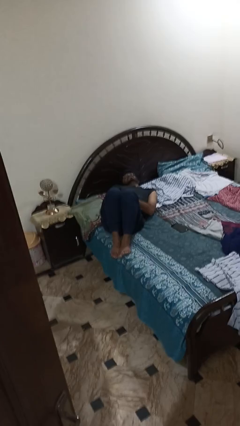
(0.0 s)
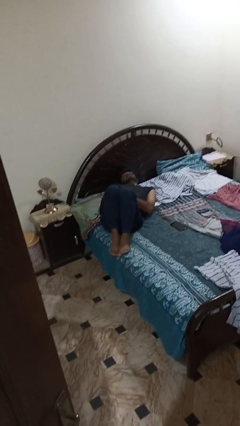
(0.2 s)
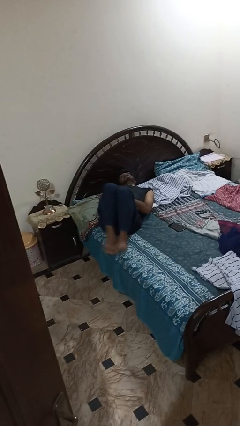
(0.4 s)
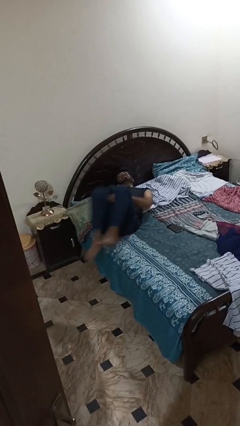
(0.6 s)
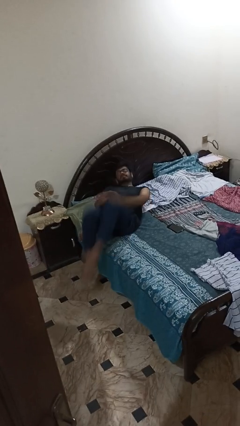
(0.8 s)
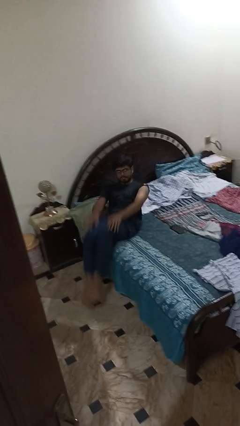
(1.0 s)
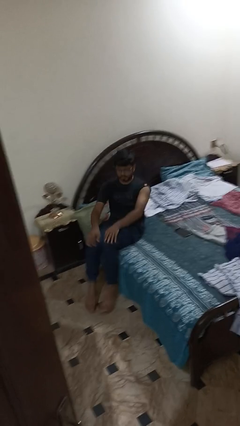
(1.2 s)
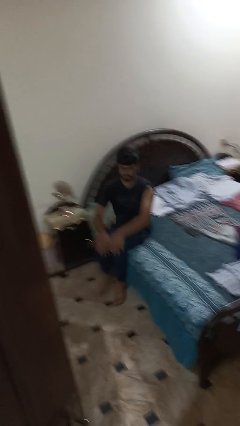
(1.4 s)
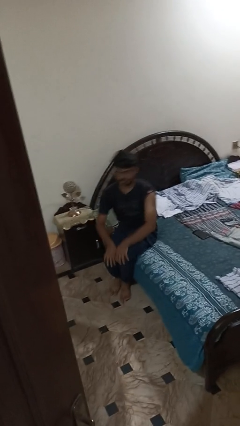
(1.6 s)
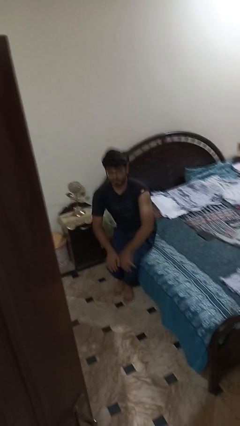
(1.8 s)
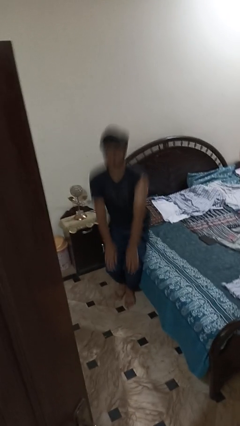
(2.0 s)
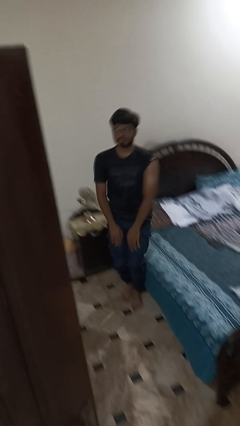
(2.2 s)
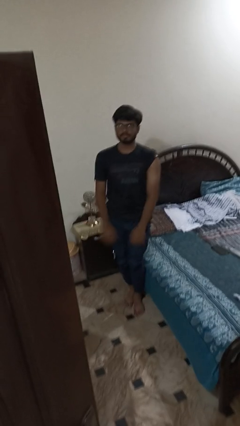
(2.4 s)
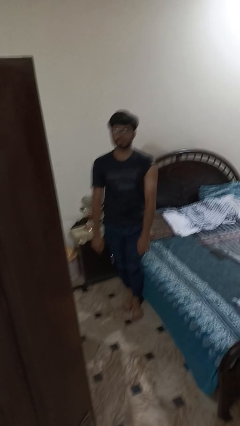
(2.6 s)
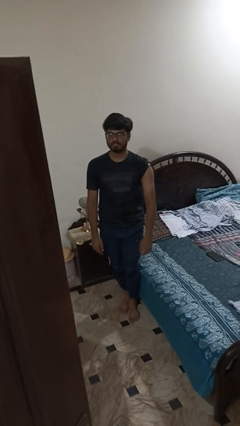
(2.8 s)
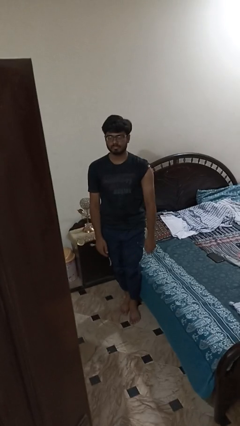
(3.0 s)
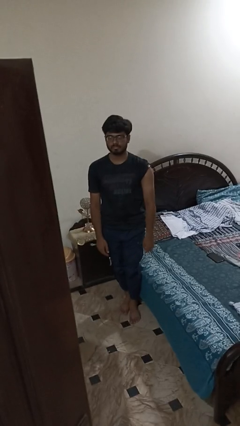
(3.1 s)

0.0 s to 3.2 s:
person stands up

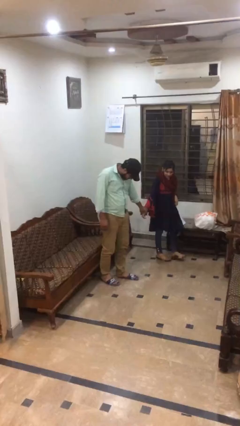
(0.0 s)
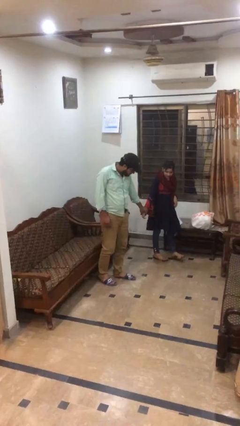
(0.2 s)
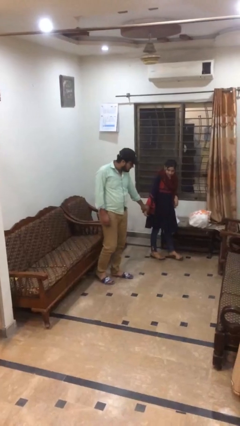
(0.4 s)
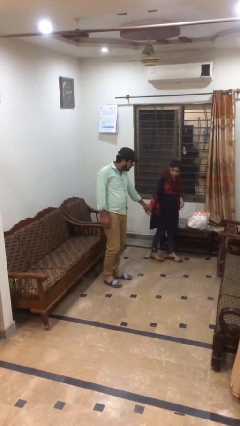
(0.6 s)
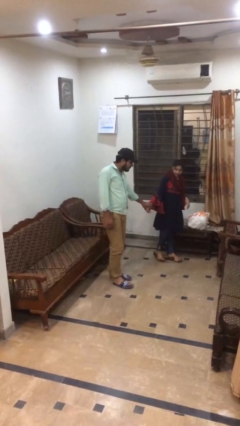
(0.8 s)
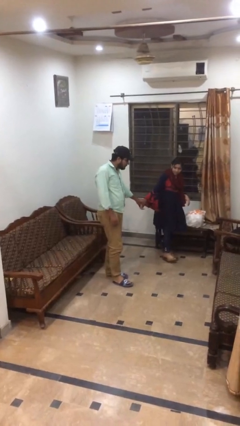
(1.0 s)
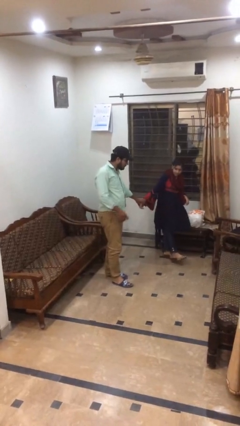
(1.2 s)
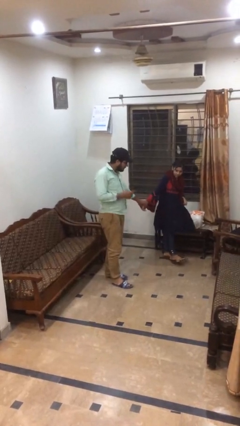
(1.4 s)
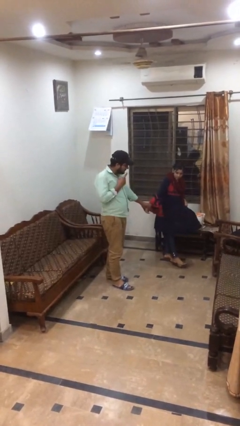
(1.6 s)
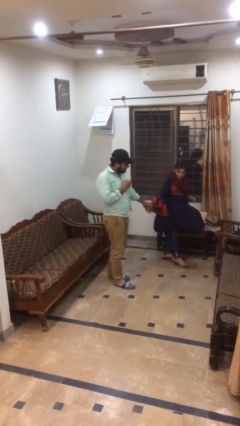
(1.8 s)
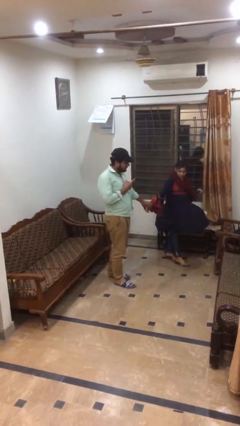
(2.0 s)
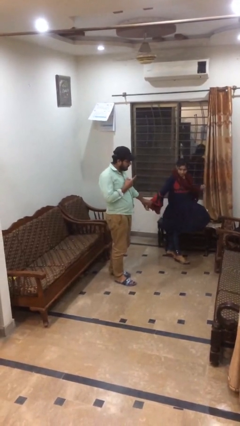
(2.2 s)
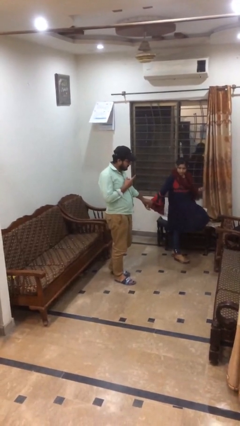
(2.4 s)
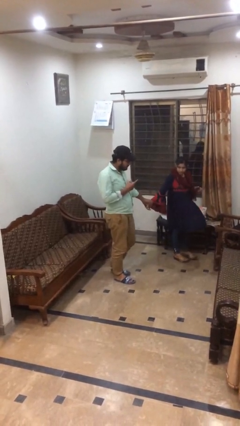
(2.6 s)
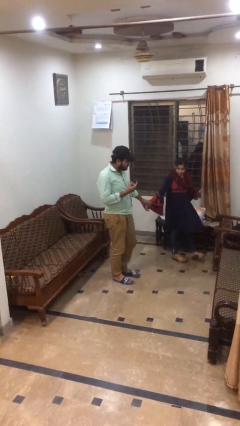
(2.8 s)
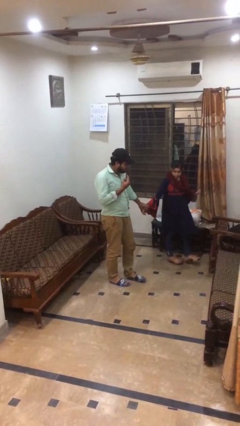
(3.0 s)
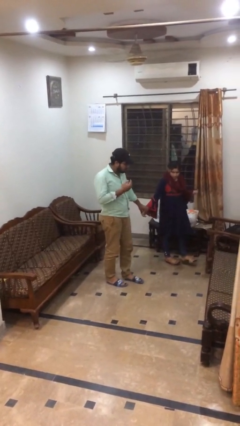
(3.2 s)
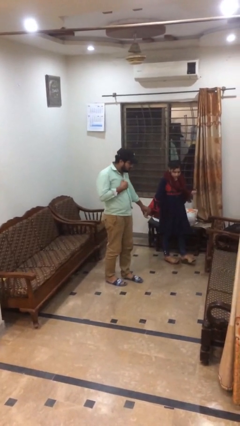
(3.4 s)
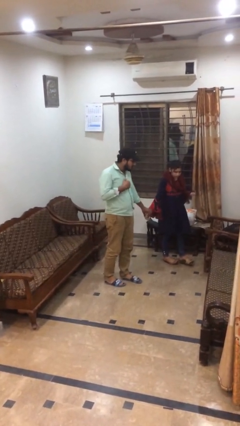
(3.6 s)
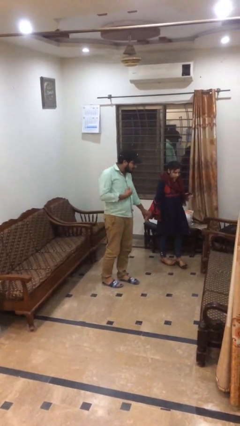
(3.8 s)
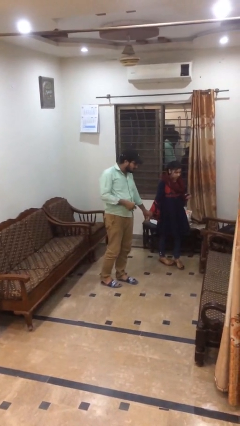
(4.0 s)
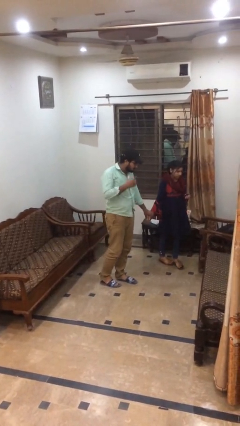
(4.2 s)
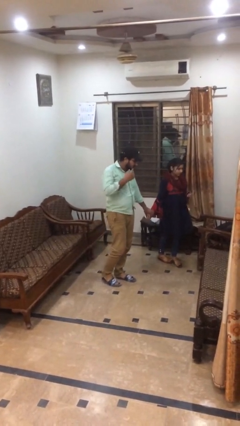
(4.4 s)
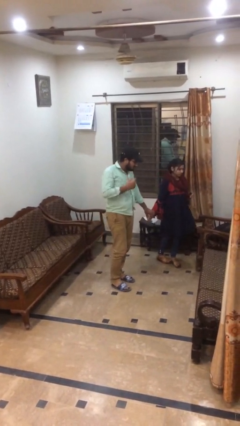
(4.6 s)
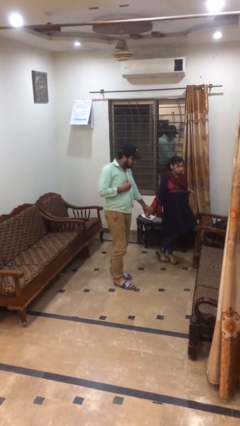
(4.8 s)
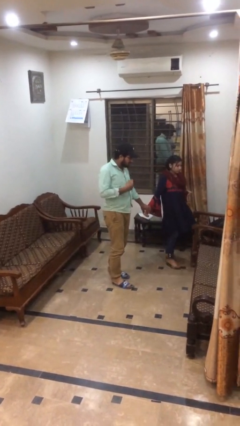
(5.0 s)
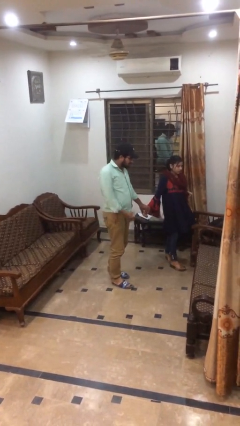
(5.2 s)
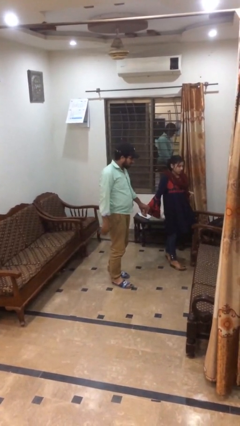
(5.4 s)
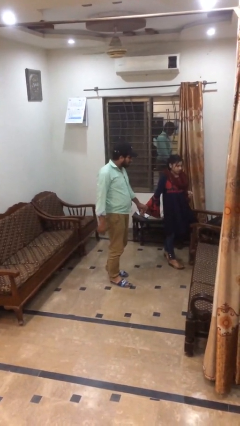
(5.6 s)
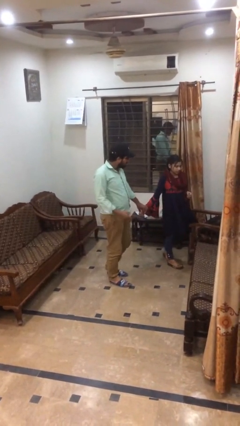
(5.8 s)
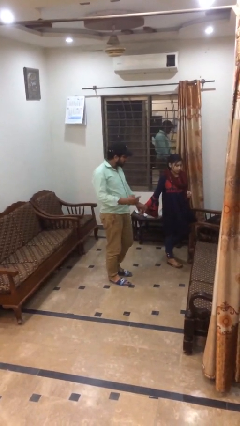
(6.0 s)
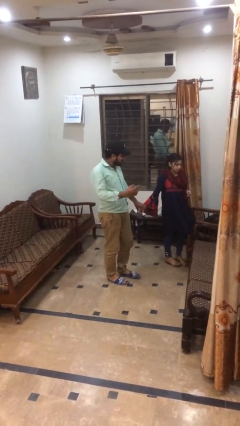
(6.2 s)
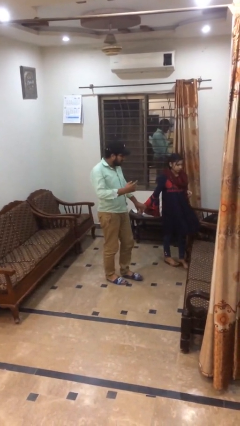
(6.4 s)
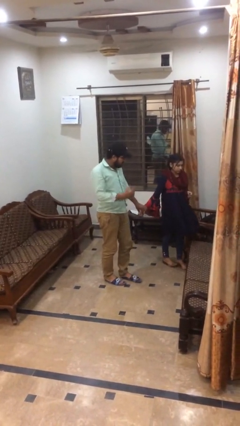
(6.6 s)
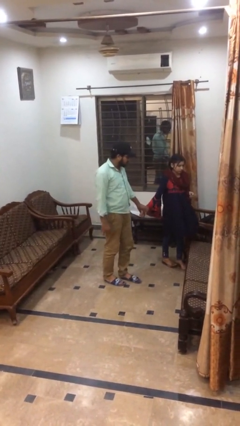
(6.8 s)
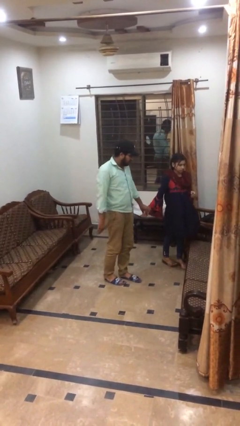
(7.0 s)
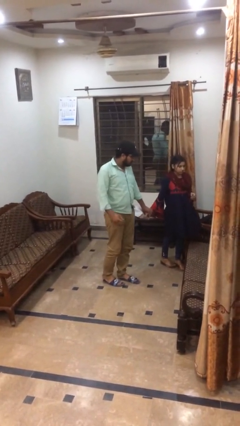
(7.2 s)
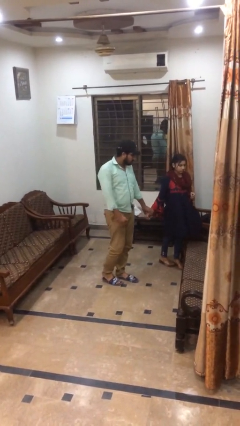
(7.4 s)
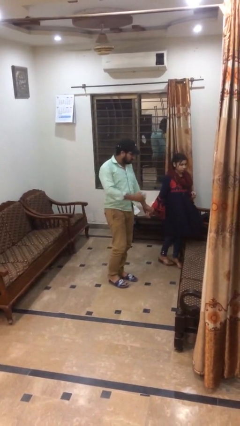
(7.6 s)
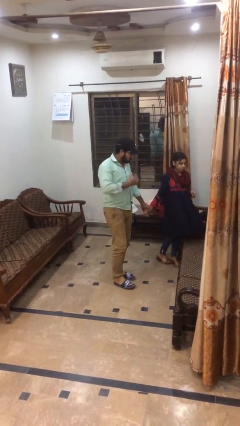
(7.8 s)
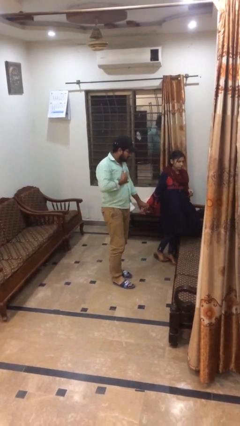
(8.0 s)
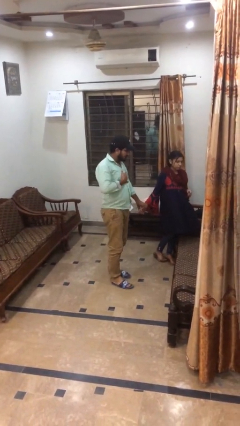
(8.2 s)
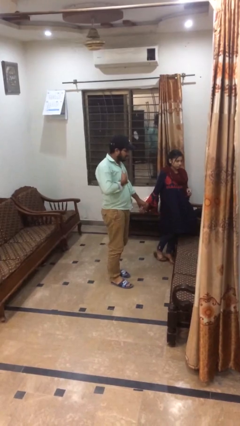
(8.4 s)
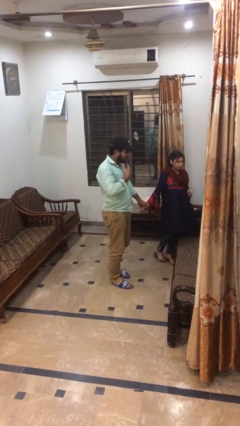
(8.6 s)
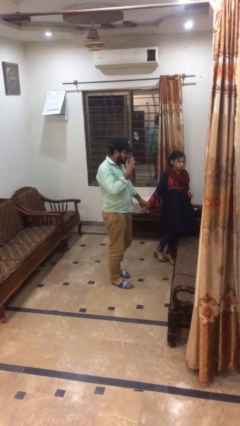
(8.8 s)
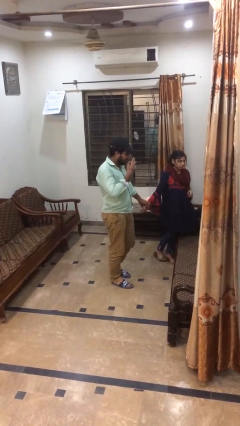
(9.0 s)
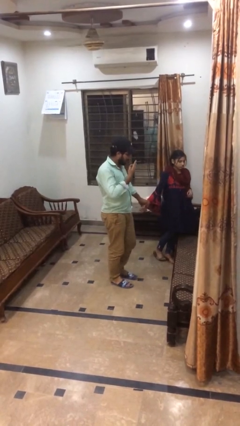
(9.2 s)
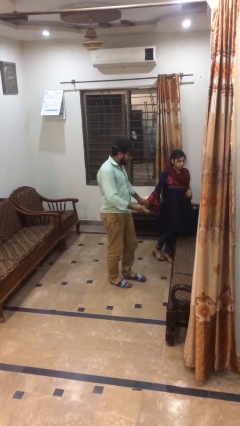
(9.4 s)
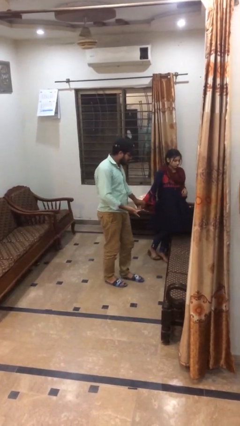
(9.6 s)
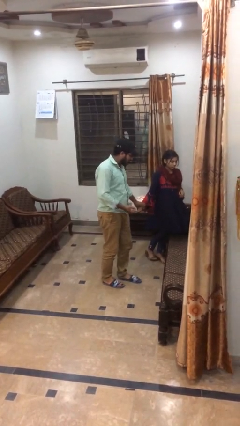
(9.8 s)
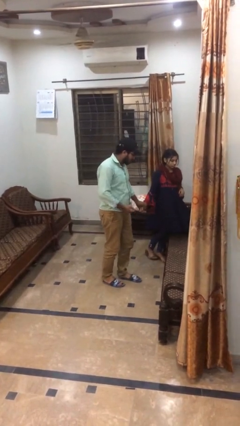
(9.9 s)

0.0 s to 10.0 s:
person holds hand

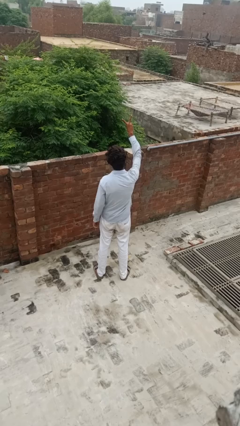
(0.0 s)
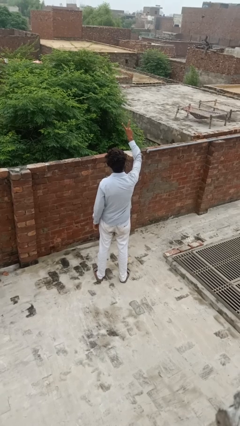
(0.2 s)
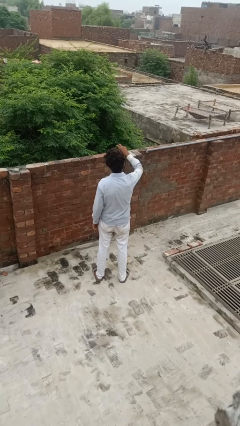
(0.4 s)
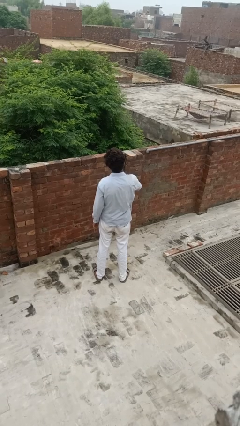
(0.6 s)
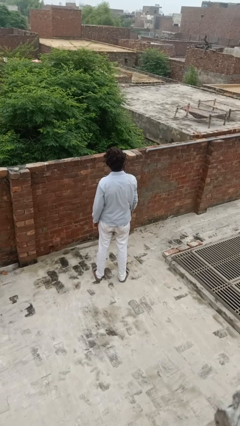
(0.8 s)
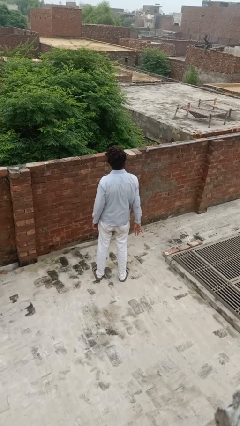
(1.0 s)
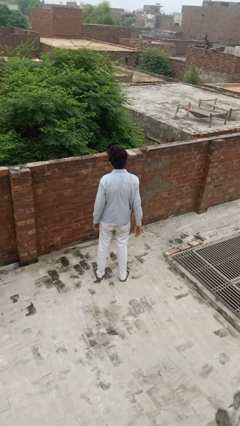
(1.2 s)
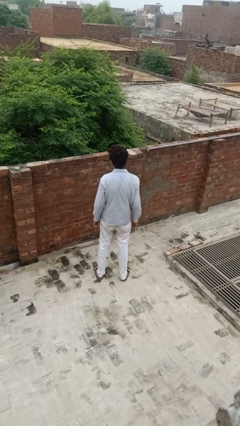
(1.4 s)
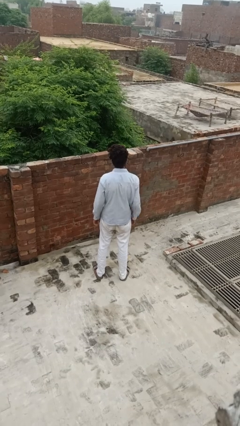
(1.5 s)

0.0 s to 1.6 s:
person gestures peace

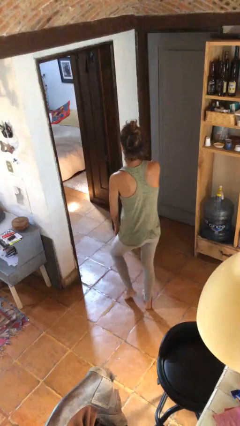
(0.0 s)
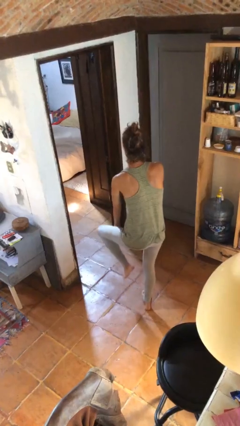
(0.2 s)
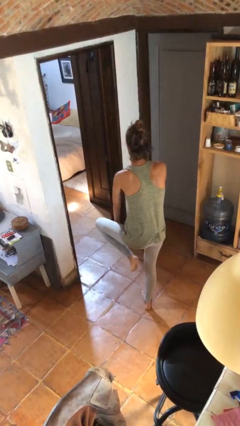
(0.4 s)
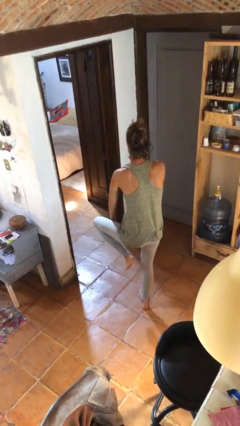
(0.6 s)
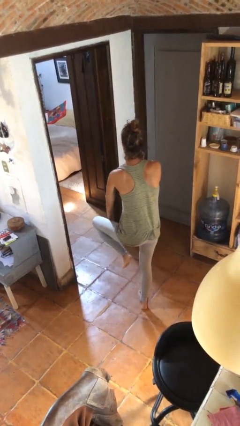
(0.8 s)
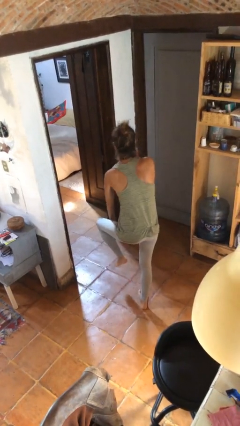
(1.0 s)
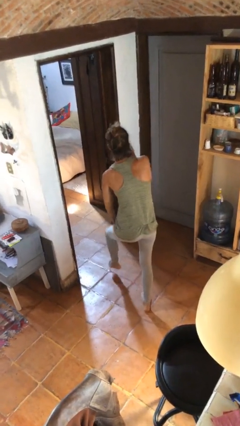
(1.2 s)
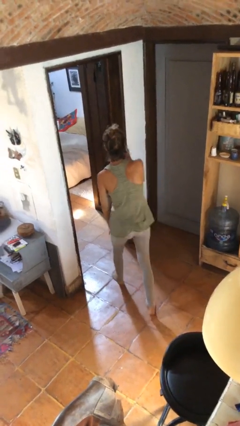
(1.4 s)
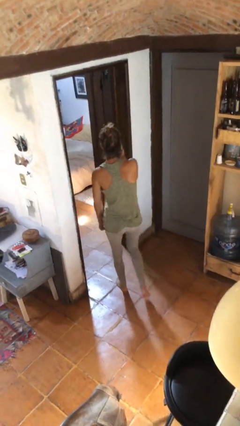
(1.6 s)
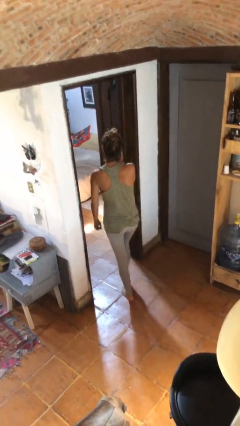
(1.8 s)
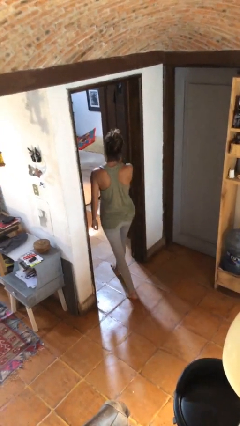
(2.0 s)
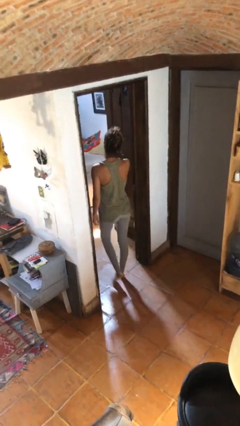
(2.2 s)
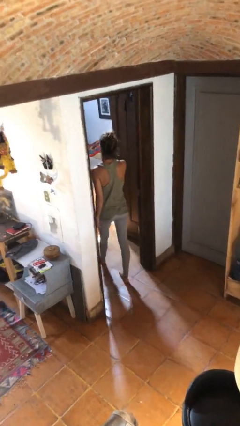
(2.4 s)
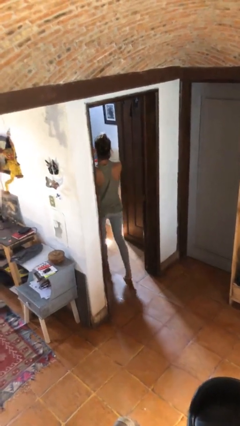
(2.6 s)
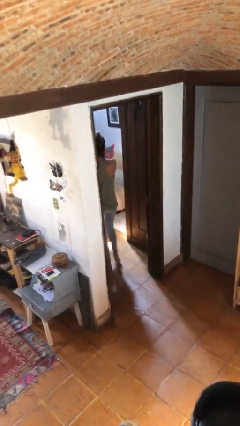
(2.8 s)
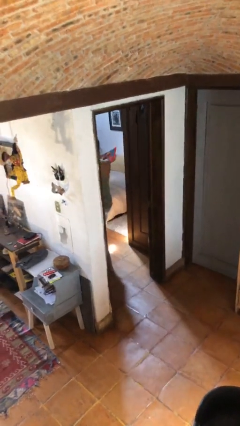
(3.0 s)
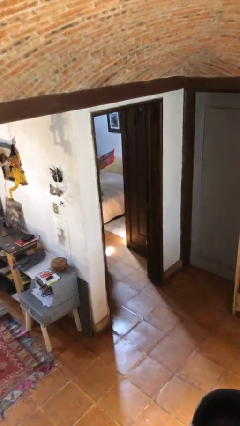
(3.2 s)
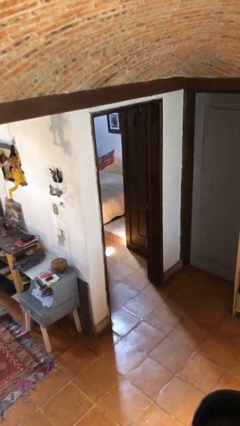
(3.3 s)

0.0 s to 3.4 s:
person exits scene through structure
